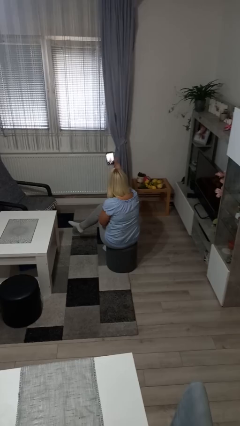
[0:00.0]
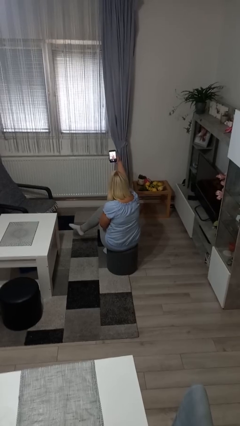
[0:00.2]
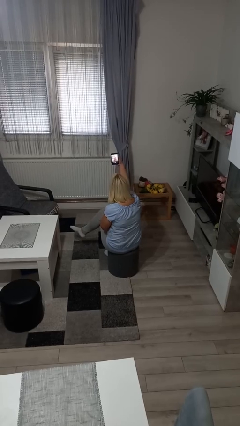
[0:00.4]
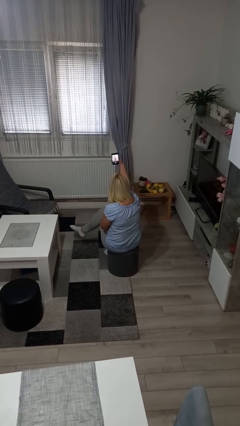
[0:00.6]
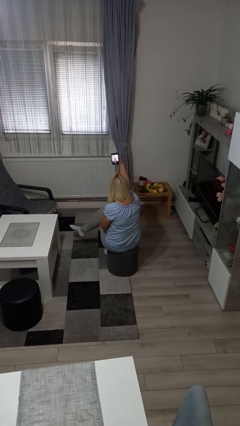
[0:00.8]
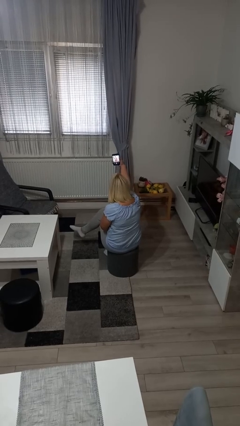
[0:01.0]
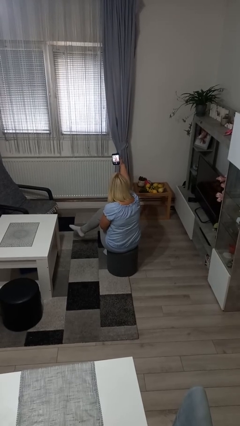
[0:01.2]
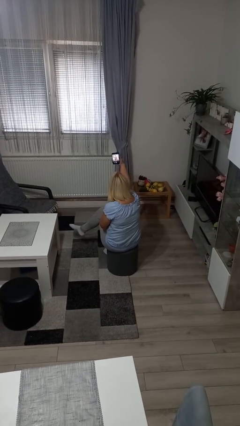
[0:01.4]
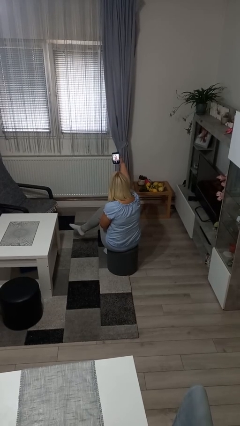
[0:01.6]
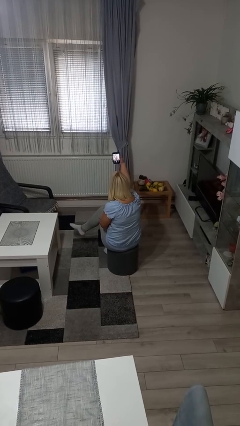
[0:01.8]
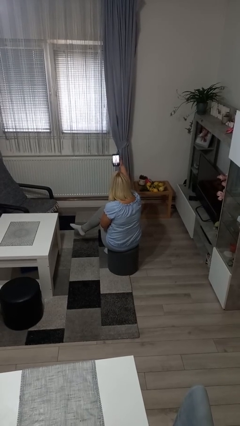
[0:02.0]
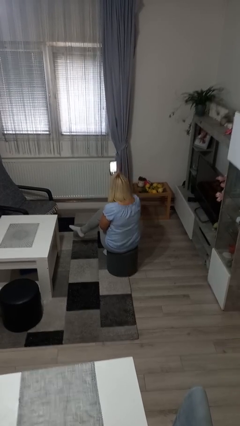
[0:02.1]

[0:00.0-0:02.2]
person takes selfie

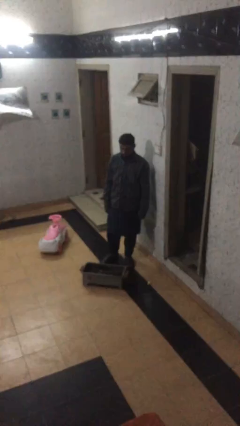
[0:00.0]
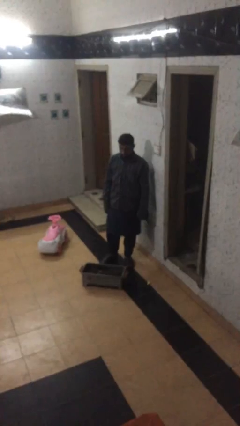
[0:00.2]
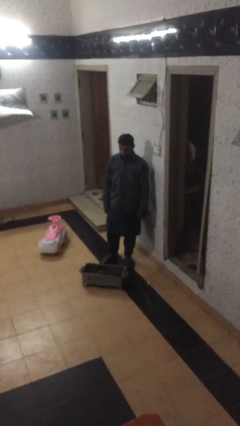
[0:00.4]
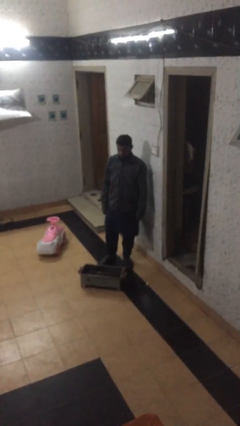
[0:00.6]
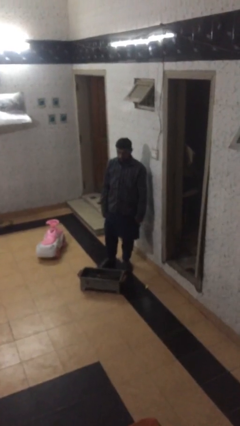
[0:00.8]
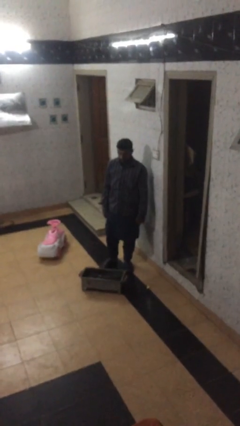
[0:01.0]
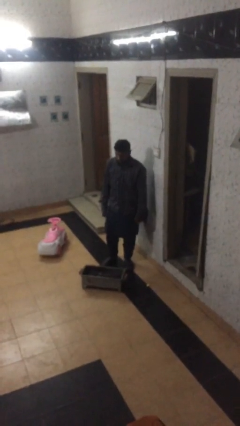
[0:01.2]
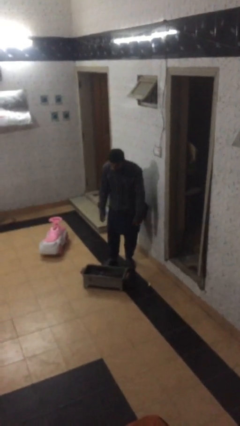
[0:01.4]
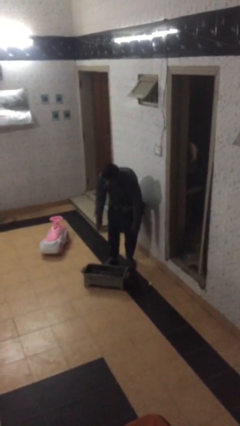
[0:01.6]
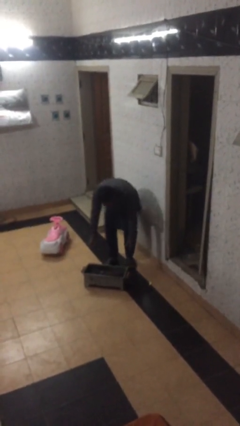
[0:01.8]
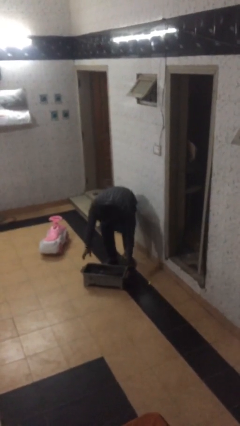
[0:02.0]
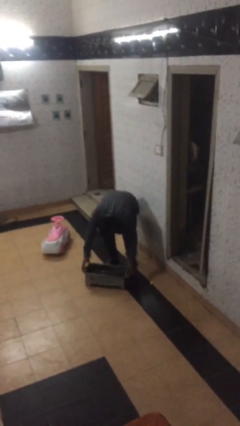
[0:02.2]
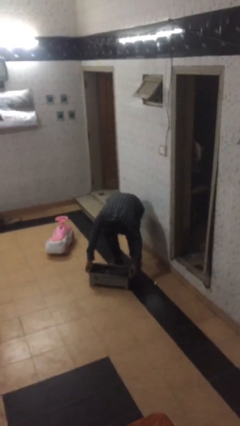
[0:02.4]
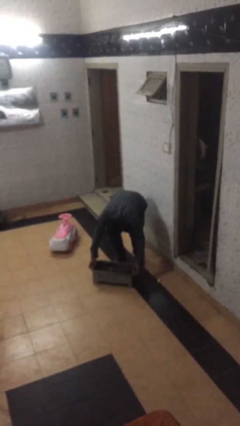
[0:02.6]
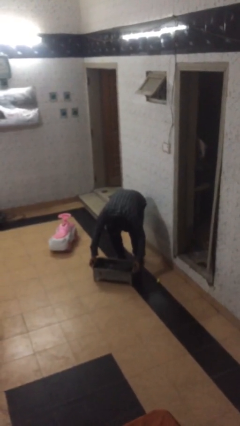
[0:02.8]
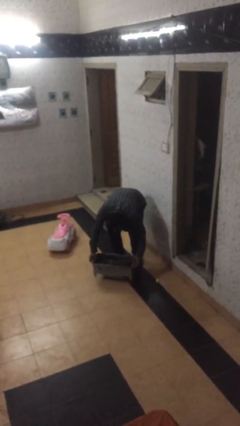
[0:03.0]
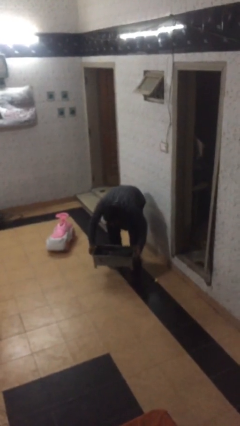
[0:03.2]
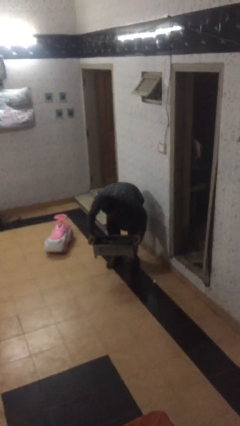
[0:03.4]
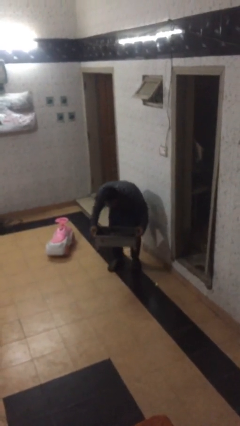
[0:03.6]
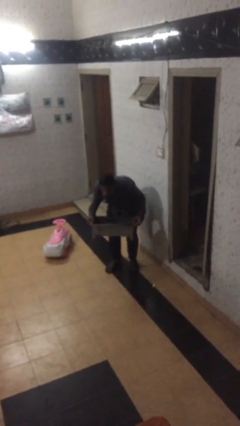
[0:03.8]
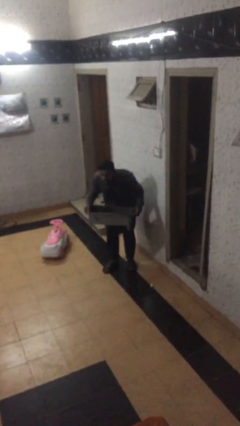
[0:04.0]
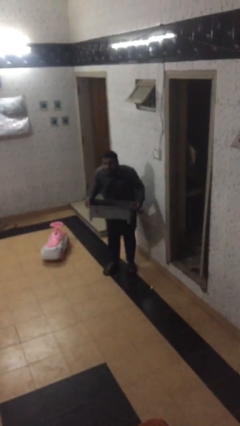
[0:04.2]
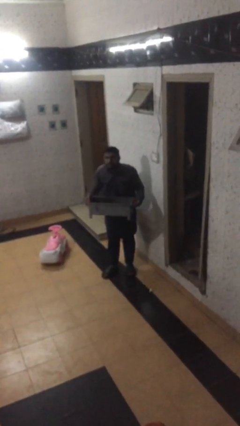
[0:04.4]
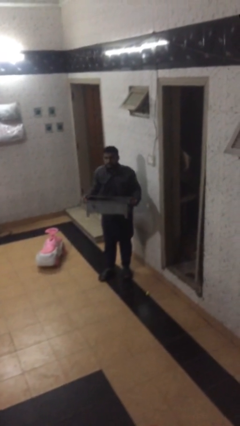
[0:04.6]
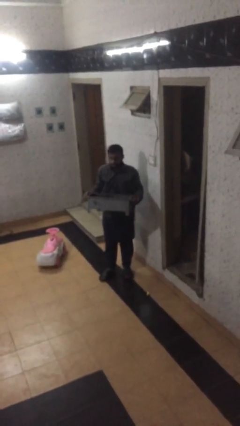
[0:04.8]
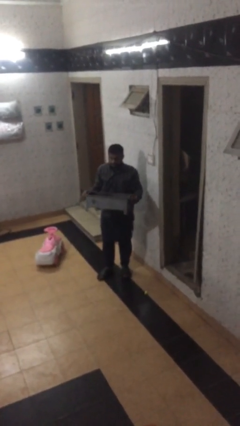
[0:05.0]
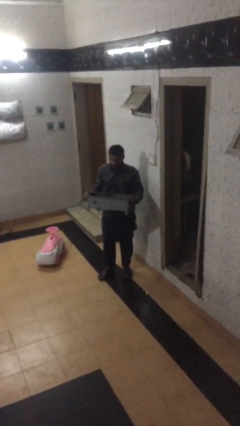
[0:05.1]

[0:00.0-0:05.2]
person picks up object from floor

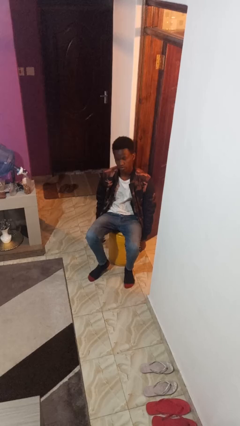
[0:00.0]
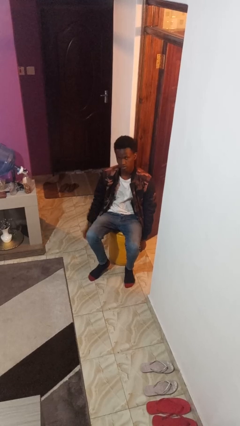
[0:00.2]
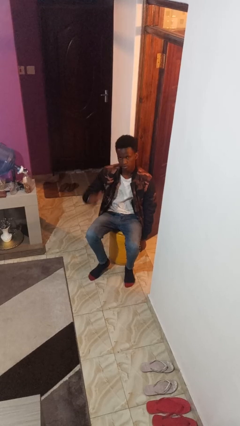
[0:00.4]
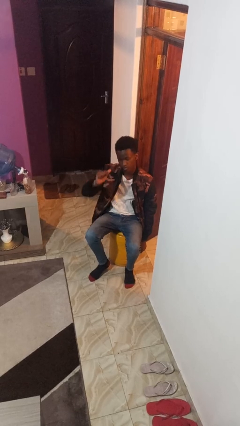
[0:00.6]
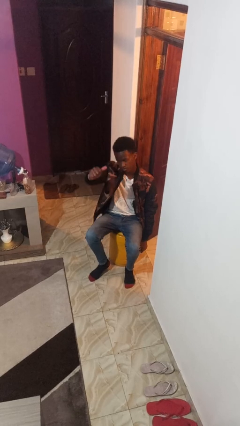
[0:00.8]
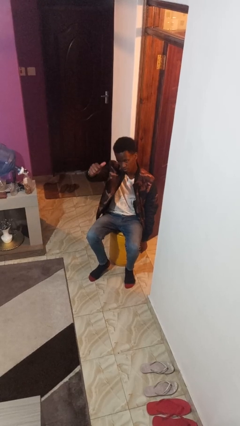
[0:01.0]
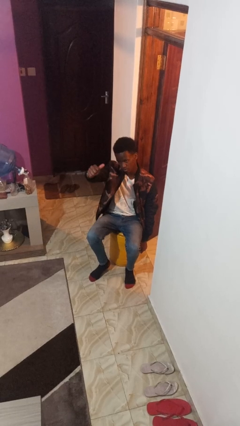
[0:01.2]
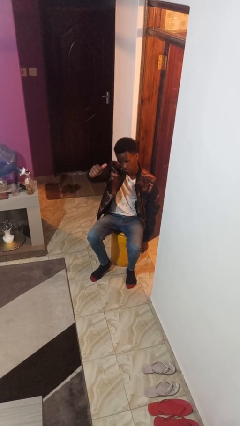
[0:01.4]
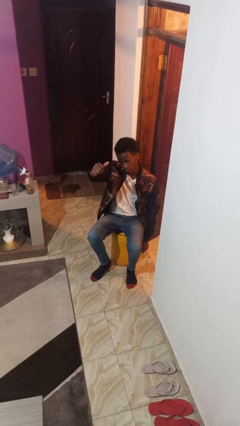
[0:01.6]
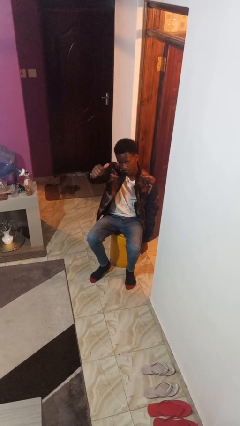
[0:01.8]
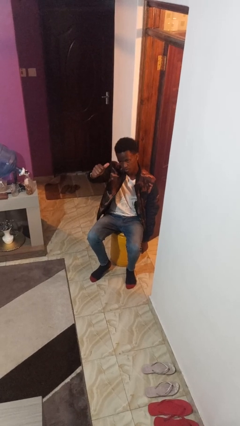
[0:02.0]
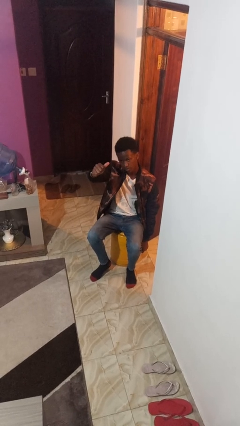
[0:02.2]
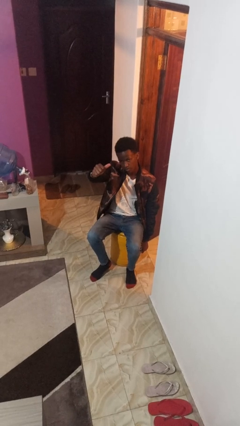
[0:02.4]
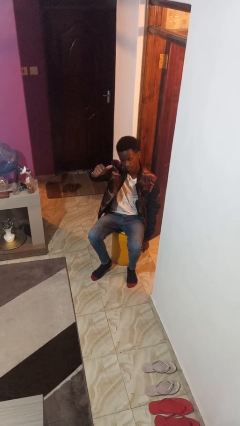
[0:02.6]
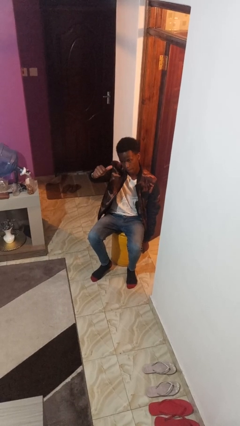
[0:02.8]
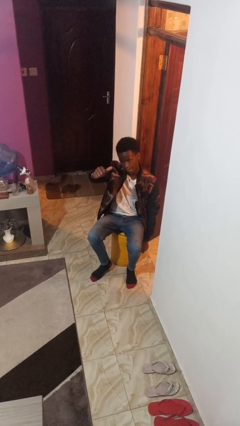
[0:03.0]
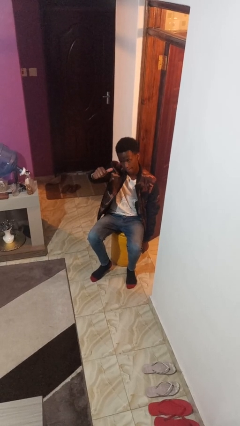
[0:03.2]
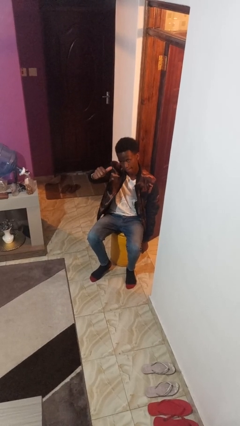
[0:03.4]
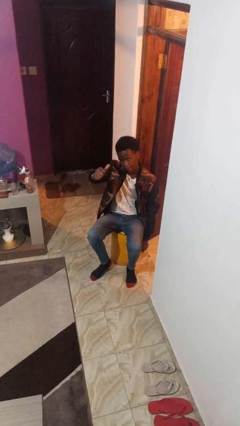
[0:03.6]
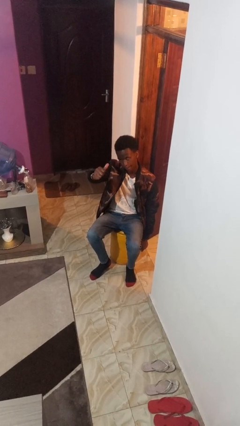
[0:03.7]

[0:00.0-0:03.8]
person gestures thumbs up

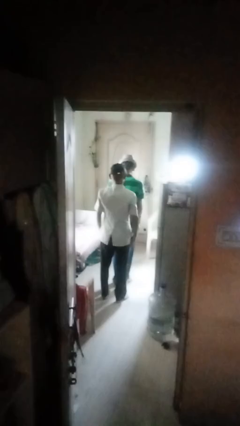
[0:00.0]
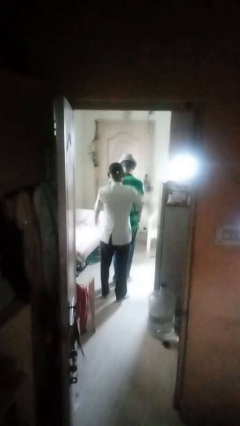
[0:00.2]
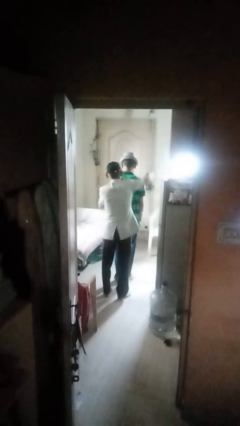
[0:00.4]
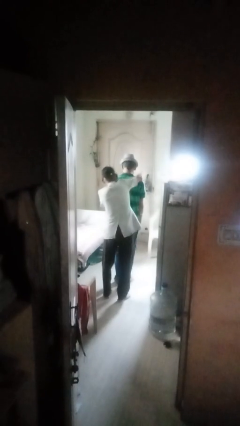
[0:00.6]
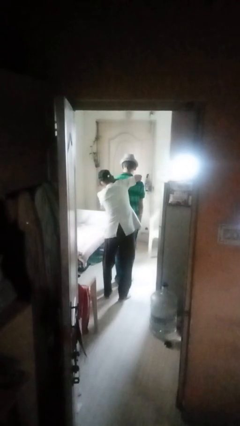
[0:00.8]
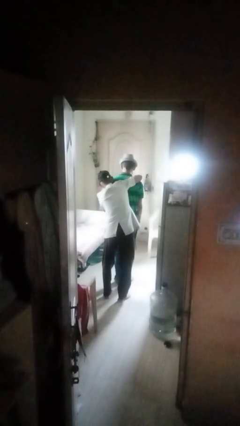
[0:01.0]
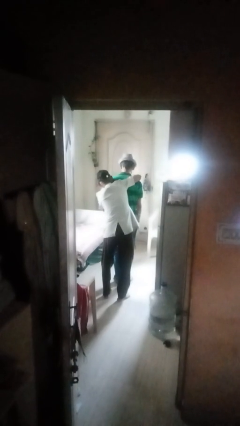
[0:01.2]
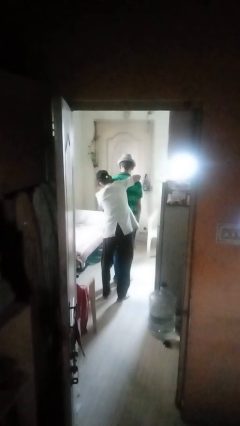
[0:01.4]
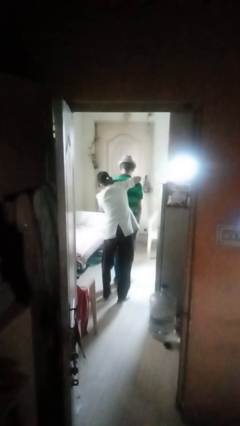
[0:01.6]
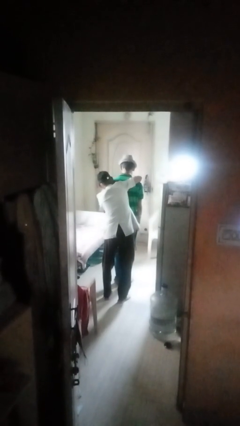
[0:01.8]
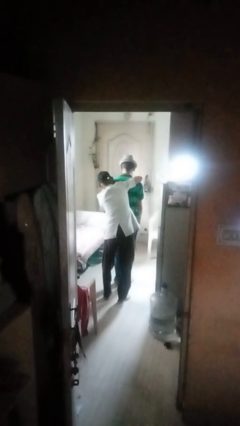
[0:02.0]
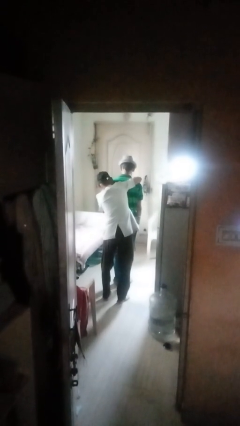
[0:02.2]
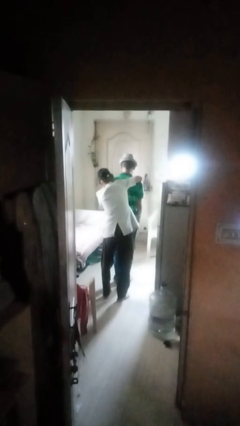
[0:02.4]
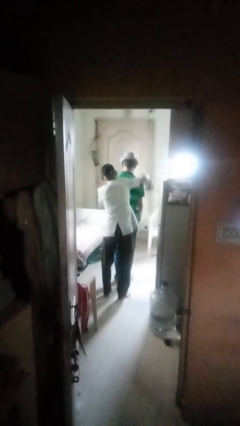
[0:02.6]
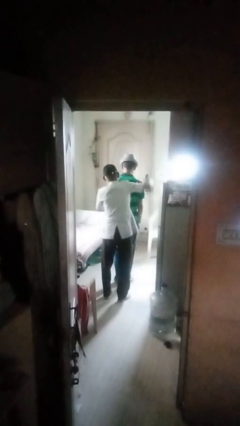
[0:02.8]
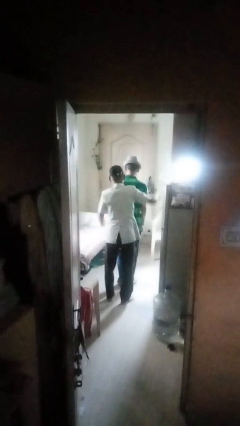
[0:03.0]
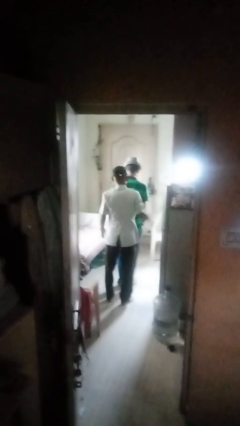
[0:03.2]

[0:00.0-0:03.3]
person hugs person from behind

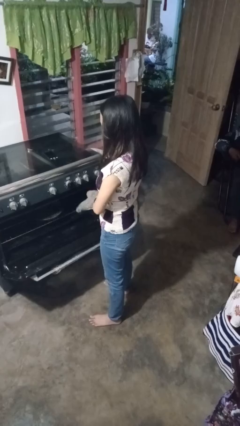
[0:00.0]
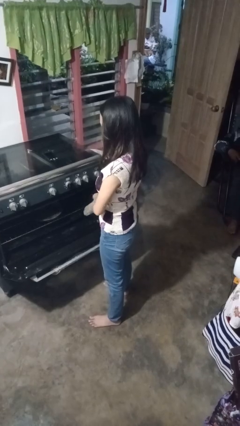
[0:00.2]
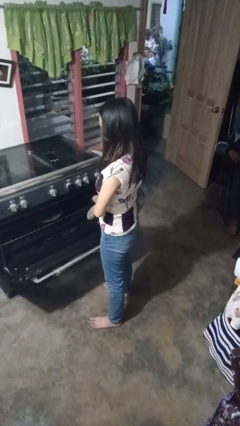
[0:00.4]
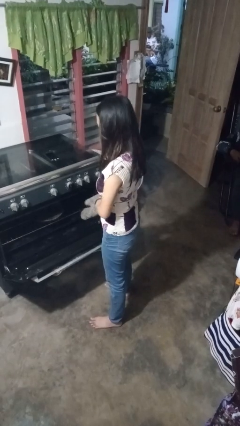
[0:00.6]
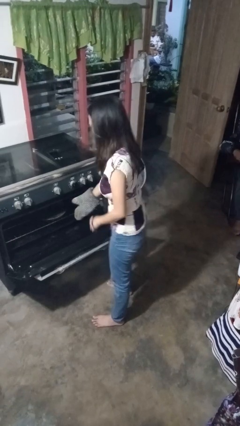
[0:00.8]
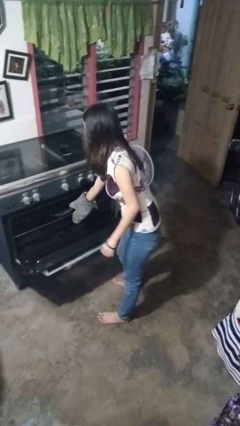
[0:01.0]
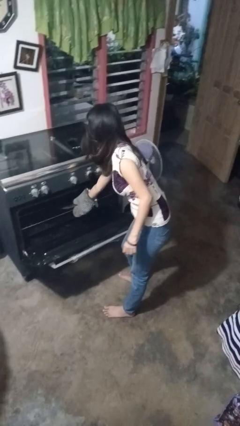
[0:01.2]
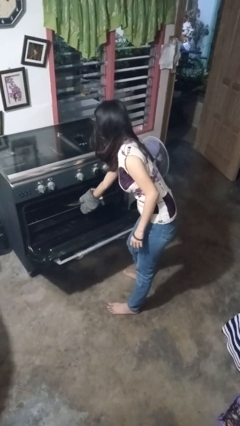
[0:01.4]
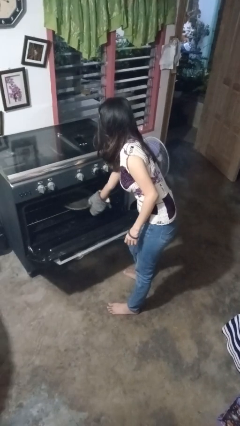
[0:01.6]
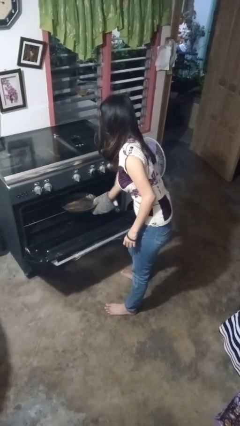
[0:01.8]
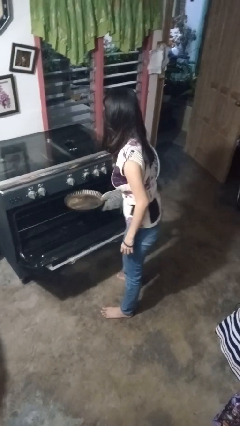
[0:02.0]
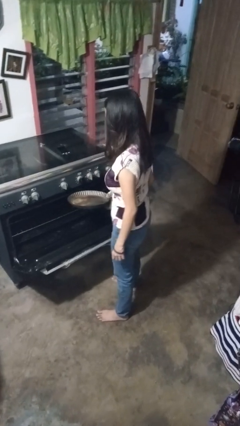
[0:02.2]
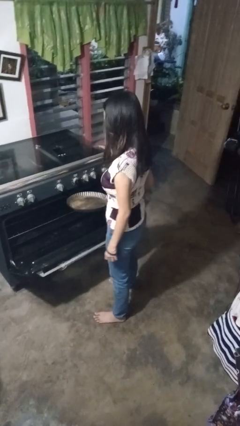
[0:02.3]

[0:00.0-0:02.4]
person takes object from oven

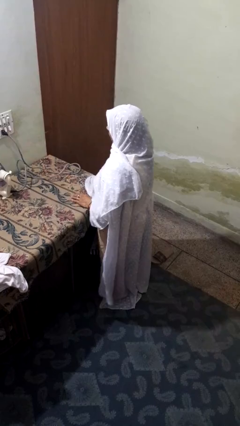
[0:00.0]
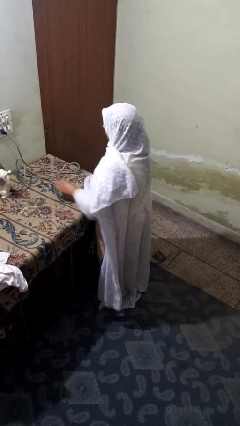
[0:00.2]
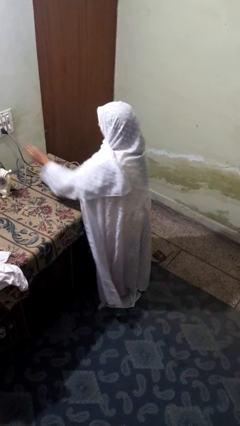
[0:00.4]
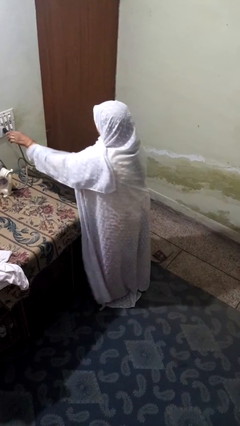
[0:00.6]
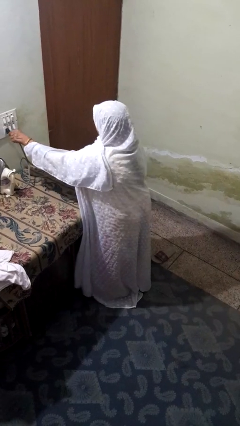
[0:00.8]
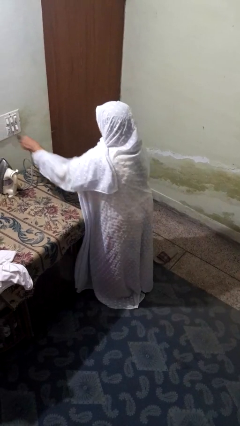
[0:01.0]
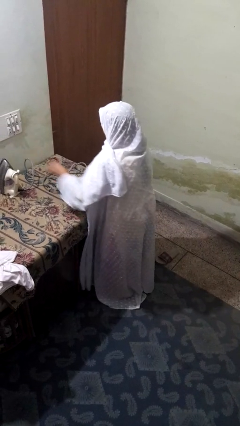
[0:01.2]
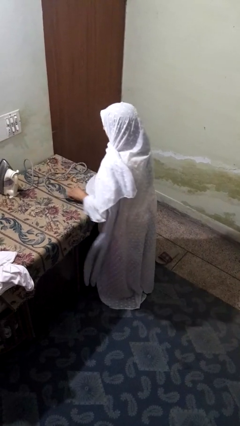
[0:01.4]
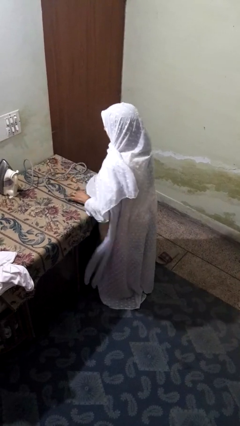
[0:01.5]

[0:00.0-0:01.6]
person unplugs from electrical socket
